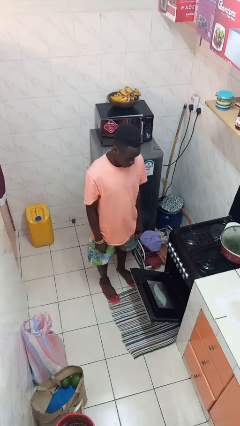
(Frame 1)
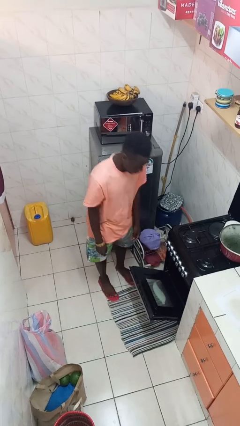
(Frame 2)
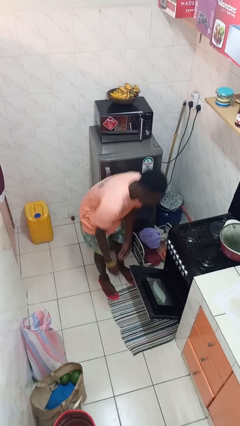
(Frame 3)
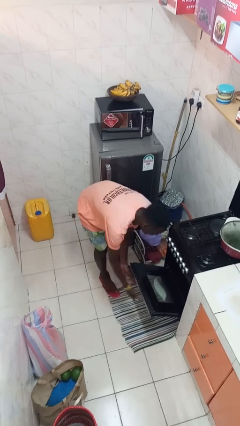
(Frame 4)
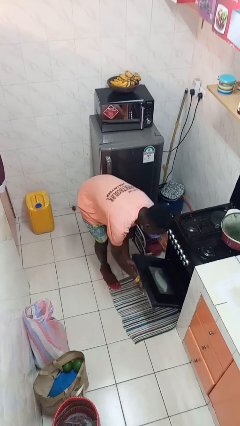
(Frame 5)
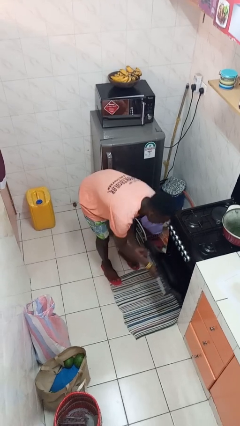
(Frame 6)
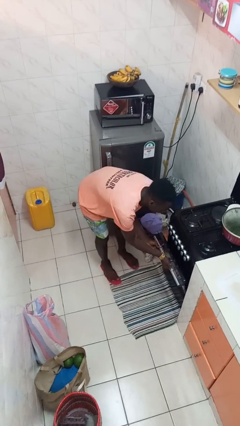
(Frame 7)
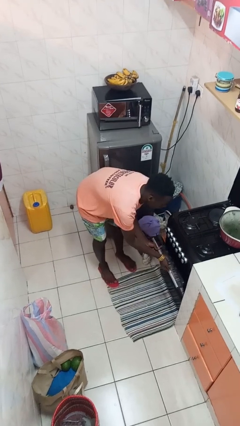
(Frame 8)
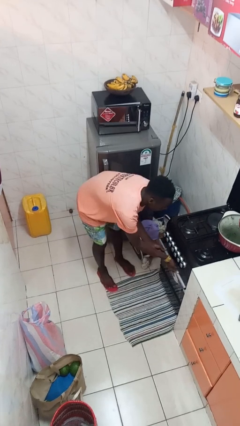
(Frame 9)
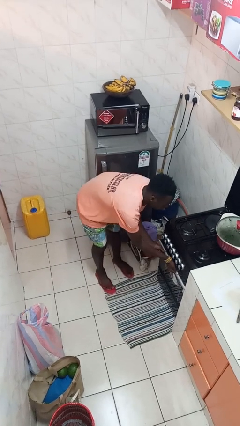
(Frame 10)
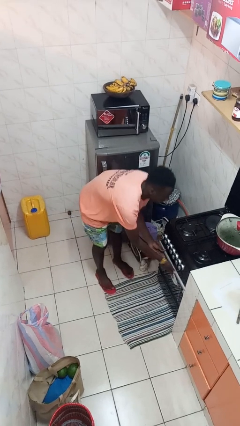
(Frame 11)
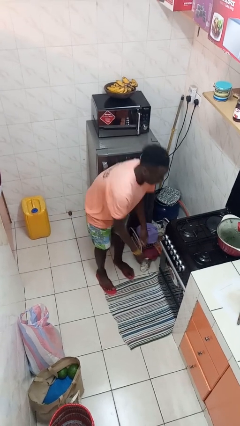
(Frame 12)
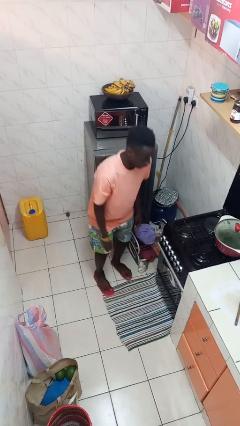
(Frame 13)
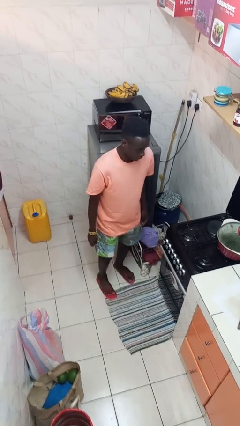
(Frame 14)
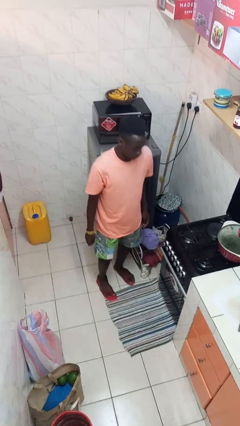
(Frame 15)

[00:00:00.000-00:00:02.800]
person closes oven door

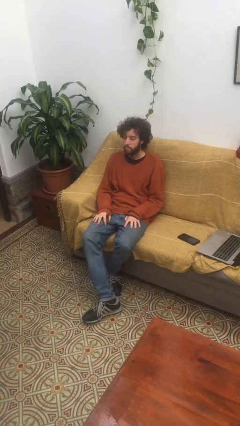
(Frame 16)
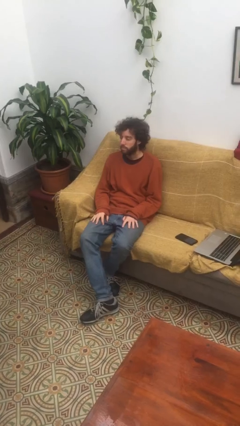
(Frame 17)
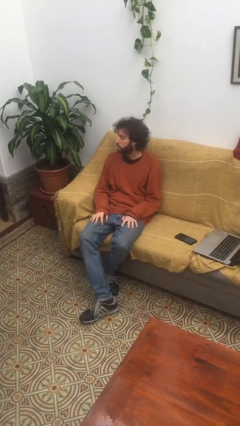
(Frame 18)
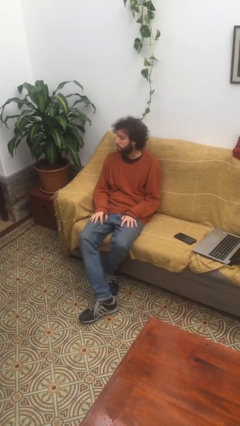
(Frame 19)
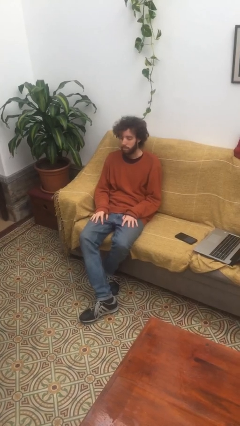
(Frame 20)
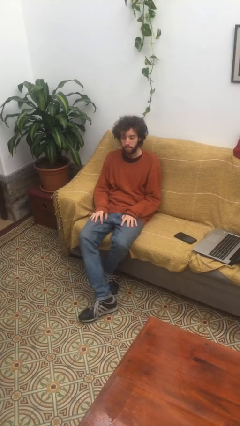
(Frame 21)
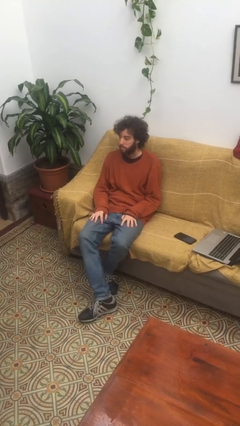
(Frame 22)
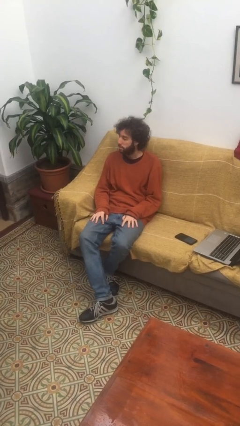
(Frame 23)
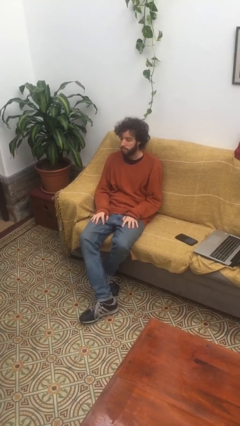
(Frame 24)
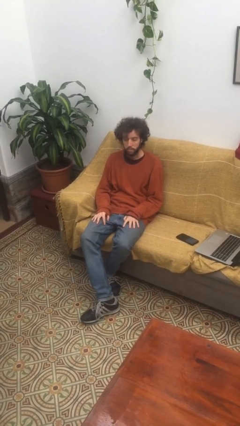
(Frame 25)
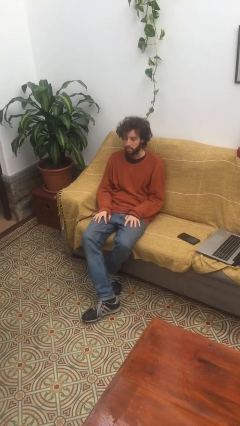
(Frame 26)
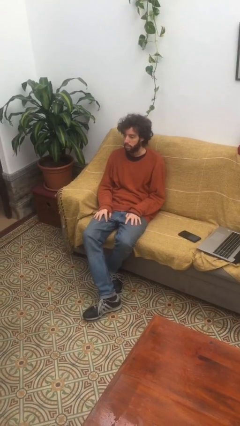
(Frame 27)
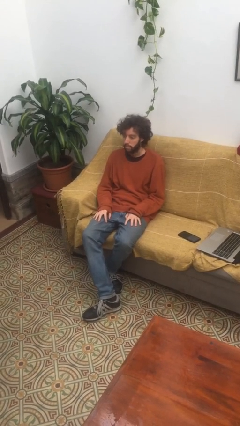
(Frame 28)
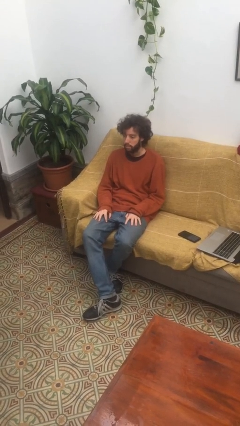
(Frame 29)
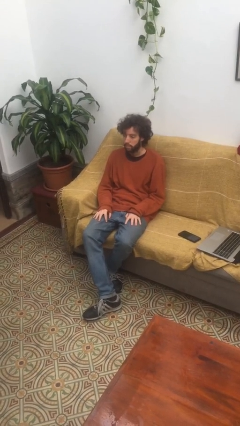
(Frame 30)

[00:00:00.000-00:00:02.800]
person shakes head

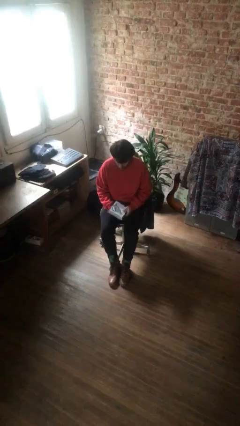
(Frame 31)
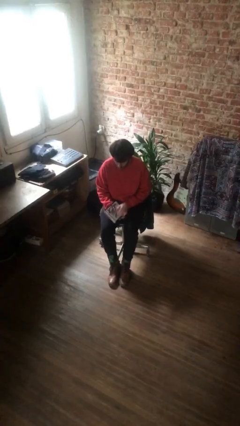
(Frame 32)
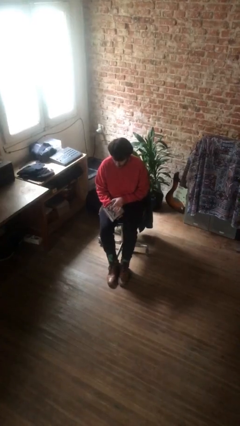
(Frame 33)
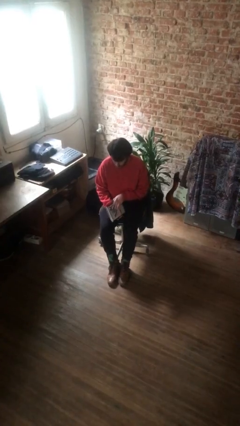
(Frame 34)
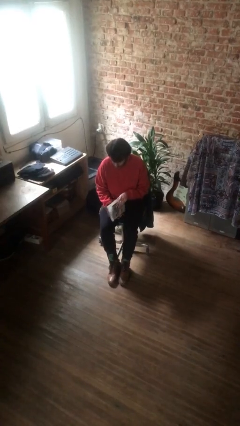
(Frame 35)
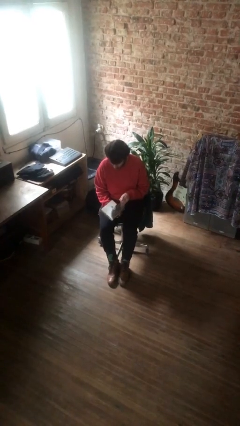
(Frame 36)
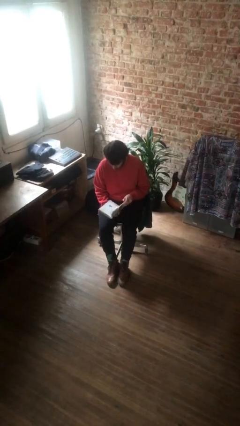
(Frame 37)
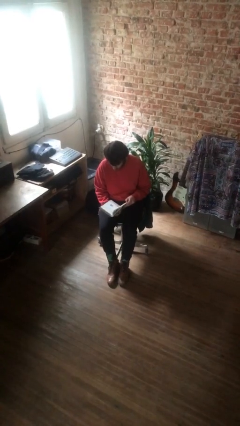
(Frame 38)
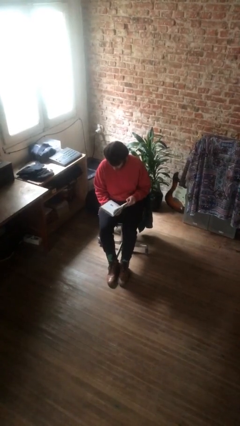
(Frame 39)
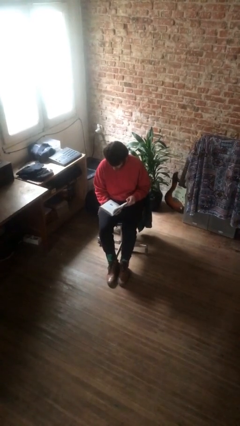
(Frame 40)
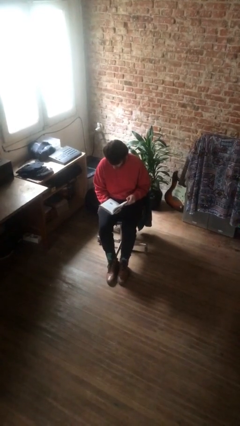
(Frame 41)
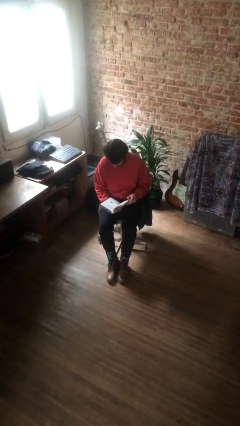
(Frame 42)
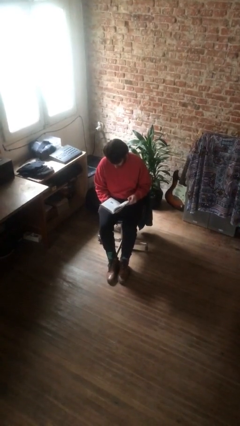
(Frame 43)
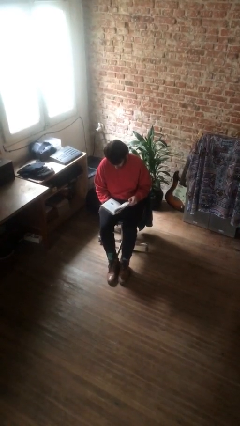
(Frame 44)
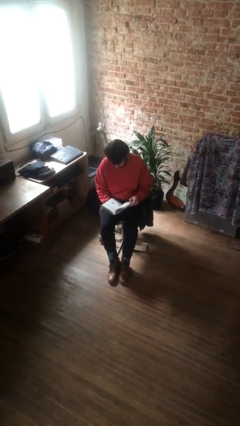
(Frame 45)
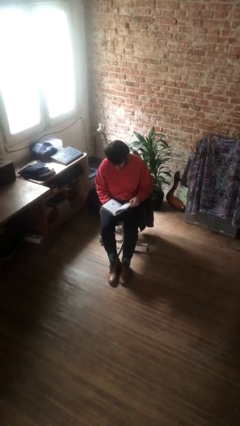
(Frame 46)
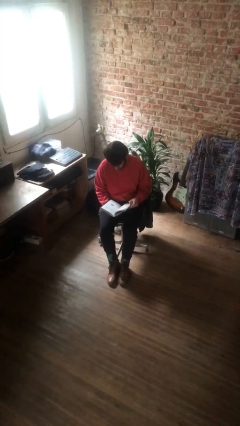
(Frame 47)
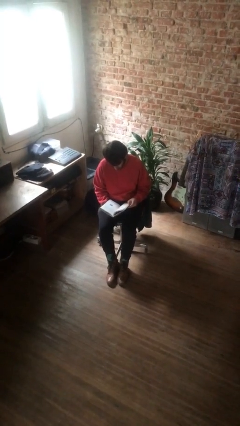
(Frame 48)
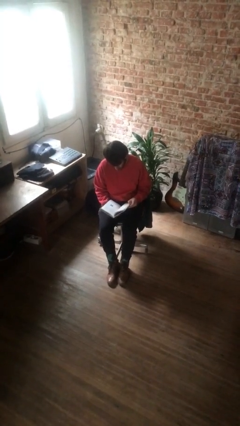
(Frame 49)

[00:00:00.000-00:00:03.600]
person reads book

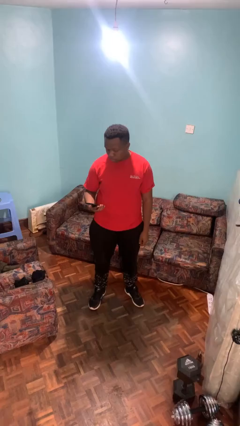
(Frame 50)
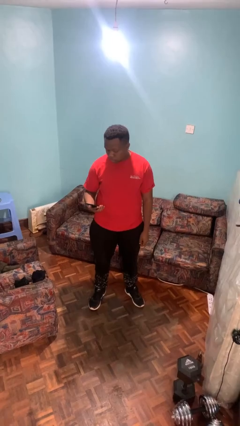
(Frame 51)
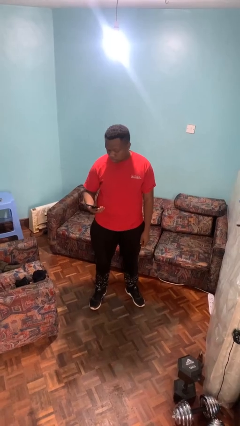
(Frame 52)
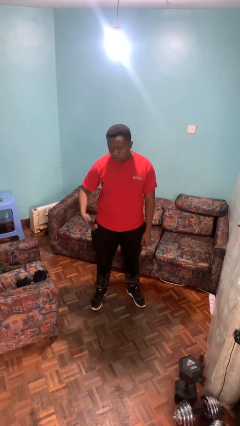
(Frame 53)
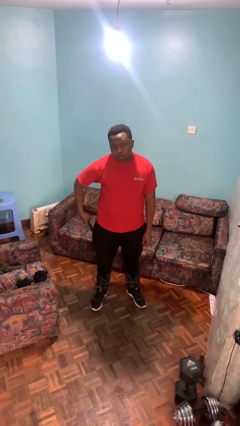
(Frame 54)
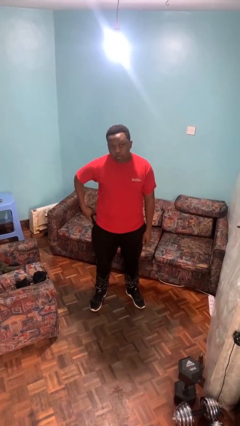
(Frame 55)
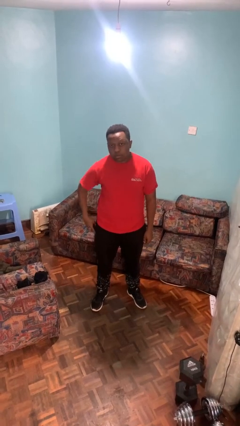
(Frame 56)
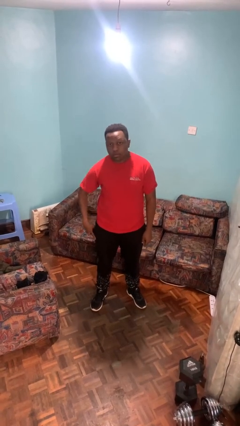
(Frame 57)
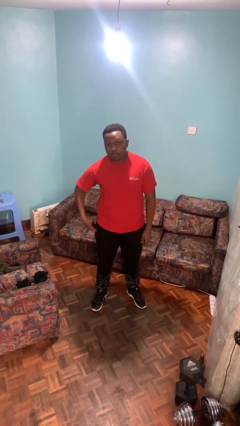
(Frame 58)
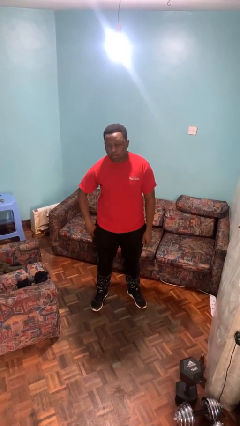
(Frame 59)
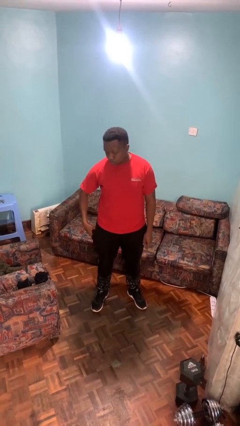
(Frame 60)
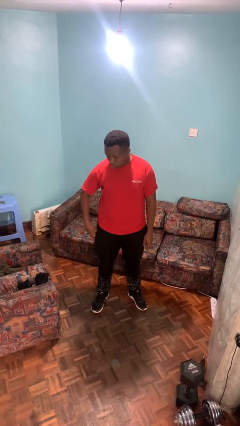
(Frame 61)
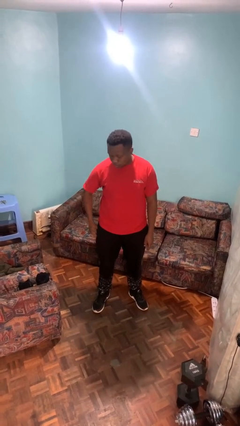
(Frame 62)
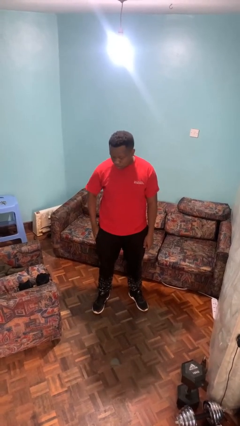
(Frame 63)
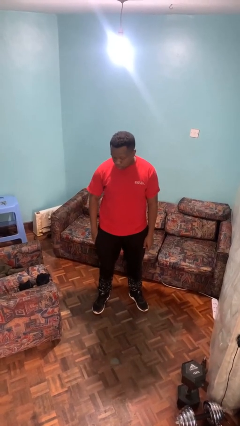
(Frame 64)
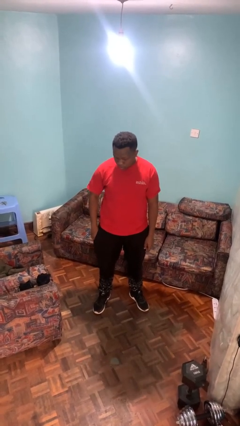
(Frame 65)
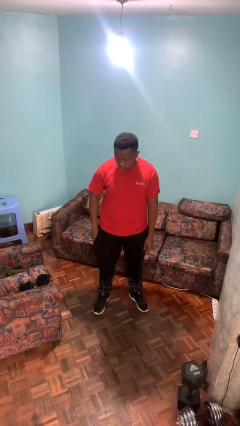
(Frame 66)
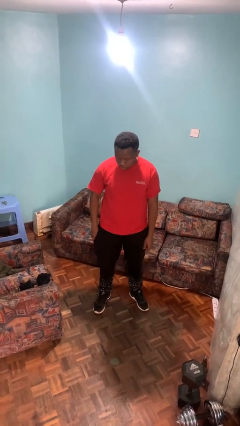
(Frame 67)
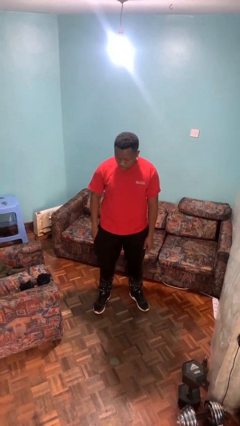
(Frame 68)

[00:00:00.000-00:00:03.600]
person puts phone into pocket

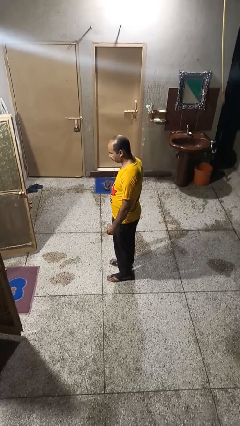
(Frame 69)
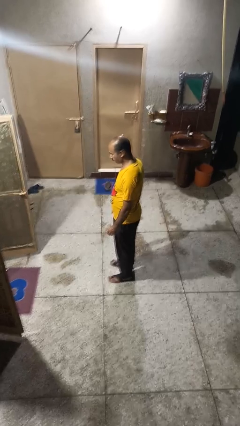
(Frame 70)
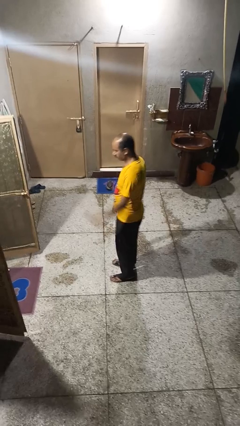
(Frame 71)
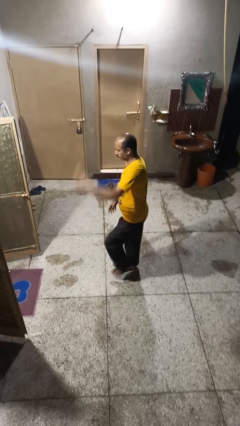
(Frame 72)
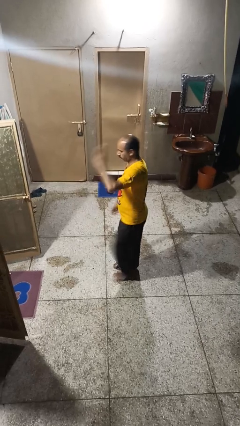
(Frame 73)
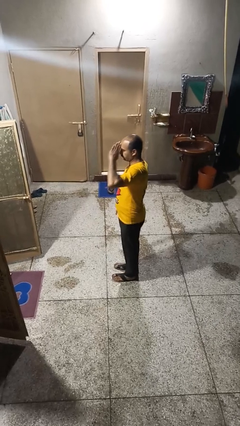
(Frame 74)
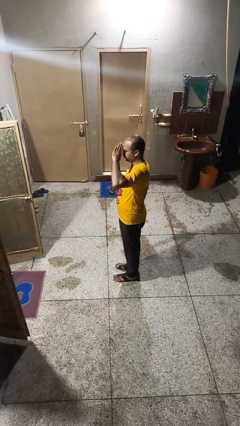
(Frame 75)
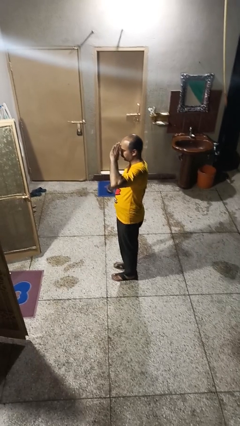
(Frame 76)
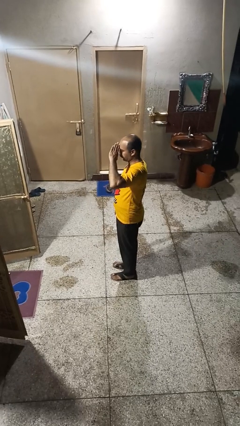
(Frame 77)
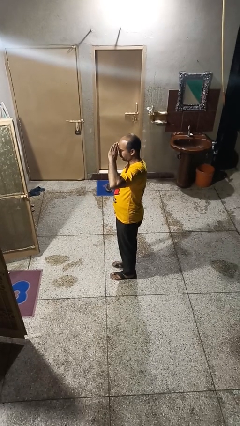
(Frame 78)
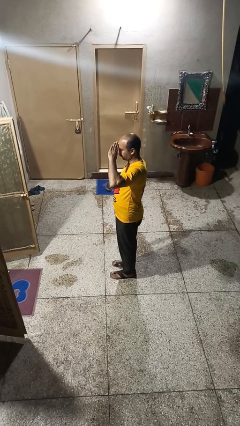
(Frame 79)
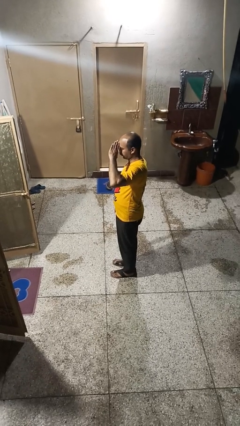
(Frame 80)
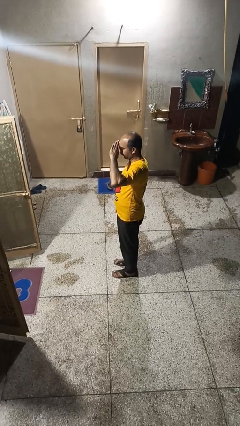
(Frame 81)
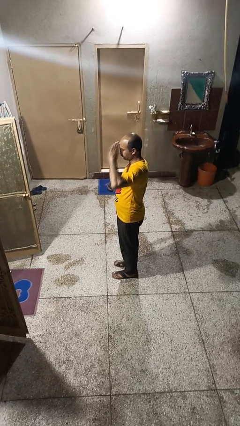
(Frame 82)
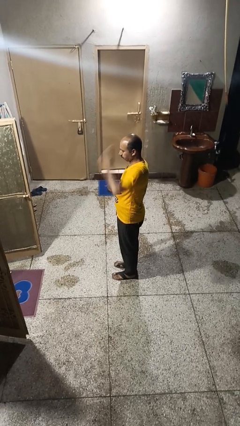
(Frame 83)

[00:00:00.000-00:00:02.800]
person salutes

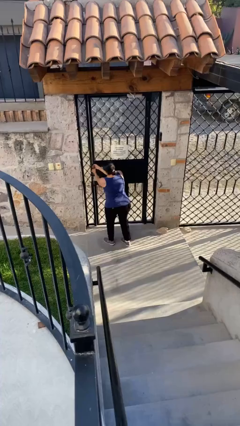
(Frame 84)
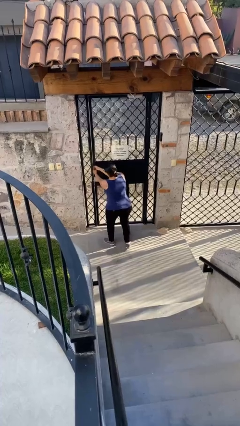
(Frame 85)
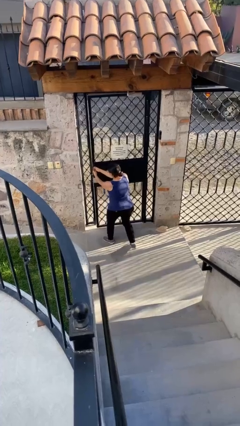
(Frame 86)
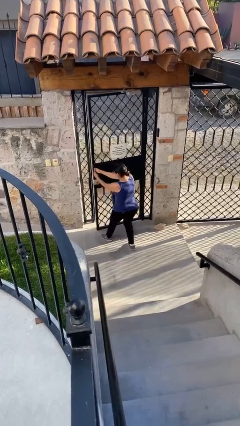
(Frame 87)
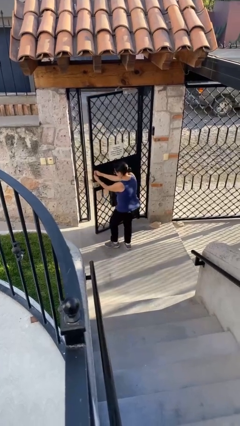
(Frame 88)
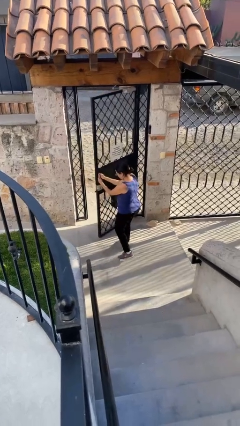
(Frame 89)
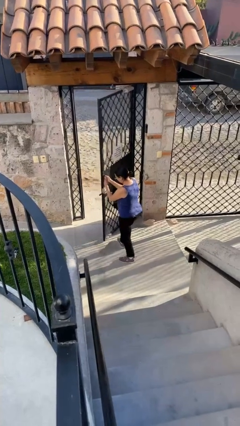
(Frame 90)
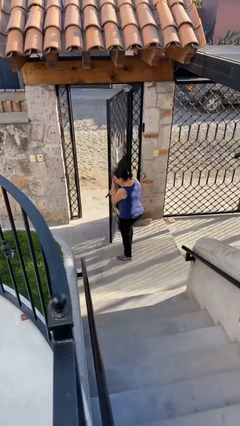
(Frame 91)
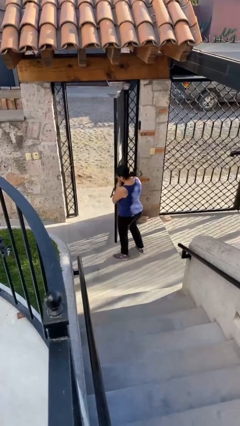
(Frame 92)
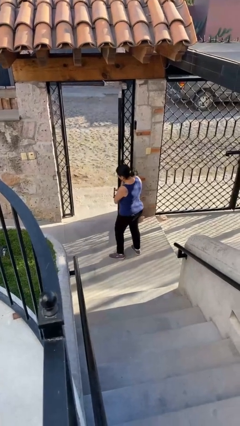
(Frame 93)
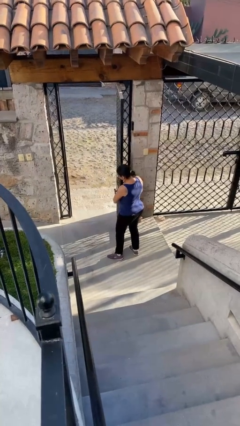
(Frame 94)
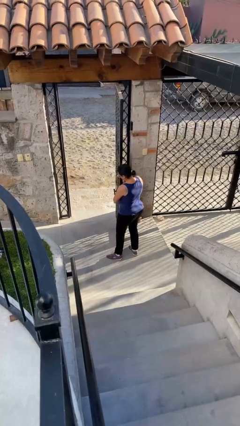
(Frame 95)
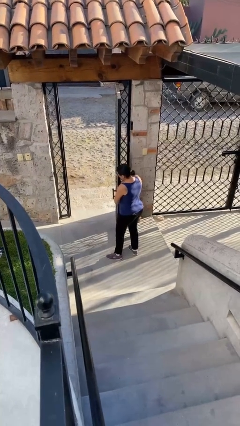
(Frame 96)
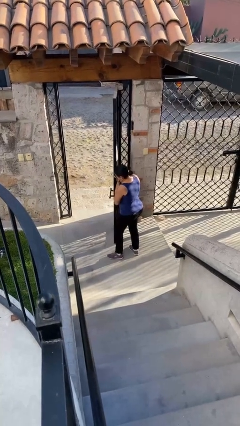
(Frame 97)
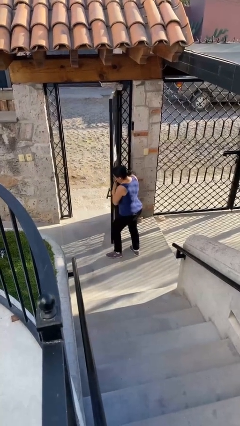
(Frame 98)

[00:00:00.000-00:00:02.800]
person opens facility door
